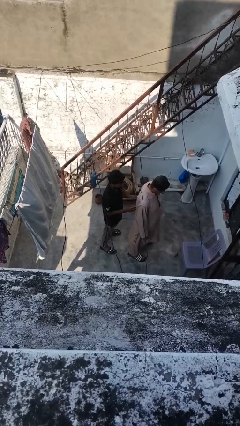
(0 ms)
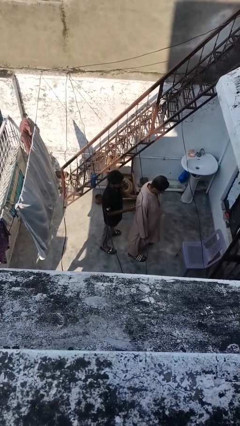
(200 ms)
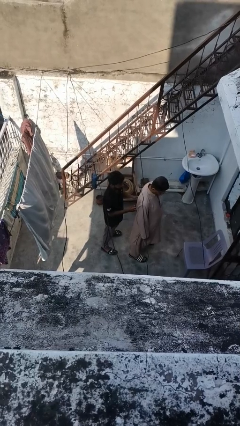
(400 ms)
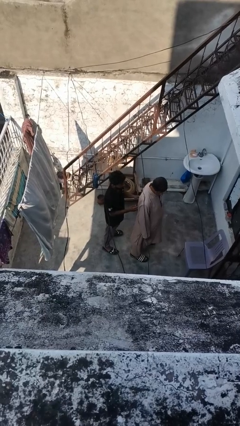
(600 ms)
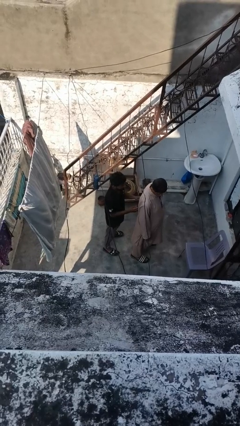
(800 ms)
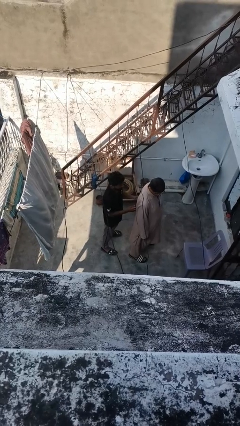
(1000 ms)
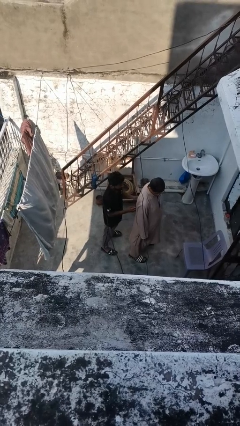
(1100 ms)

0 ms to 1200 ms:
person touches back of person

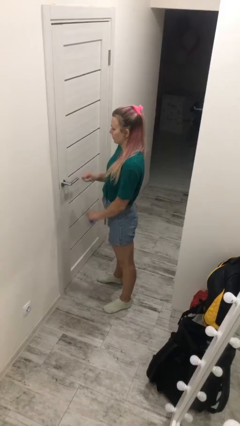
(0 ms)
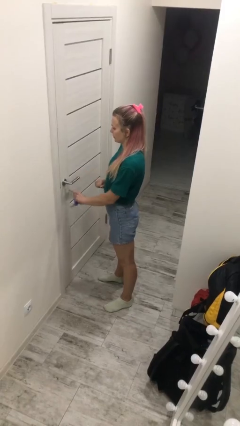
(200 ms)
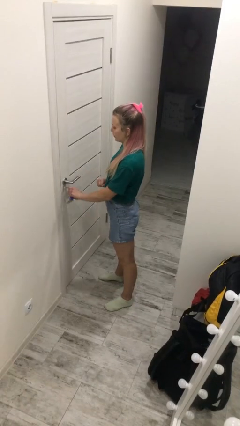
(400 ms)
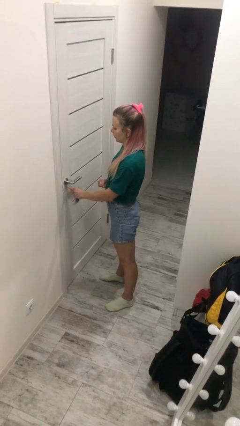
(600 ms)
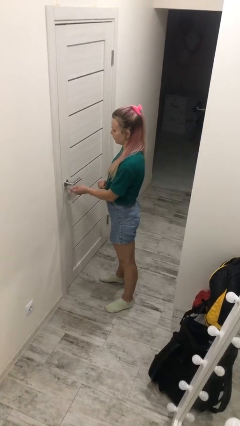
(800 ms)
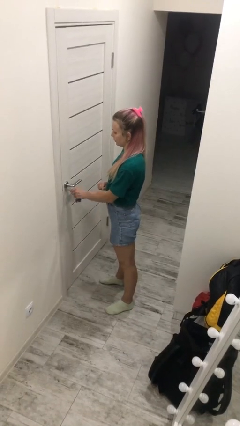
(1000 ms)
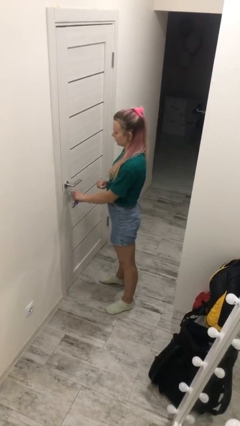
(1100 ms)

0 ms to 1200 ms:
person unlocks door with keys

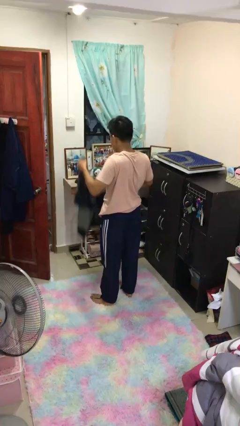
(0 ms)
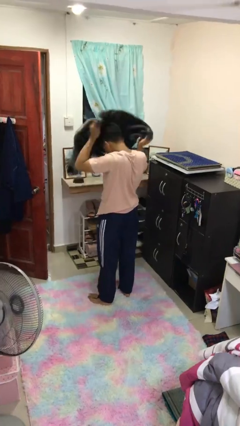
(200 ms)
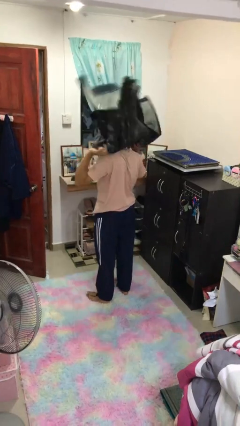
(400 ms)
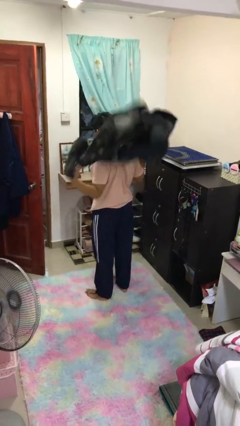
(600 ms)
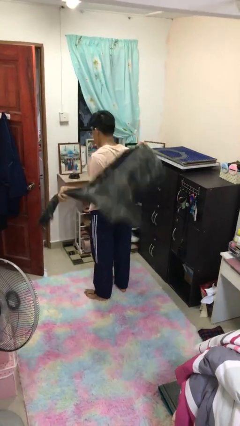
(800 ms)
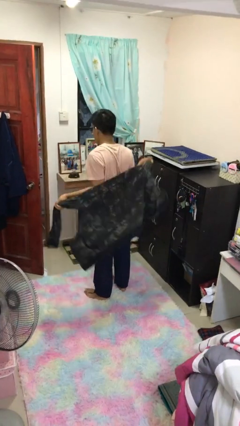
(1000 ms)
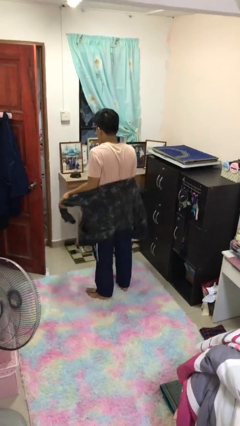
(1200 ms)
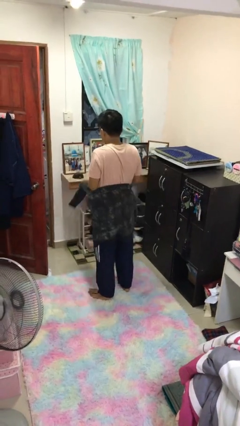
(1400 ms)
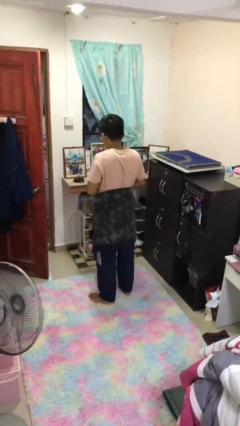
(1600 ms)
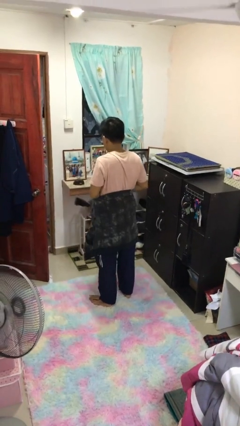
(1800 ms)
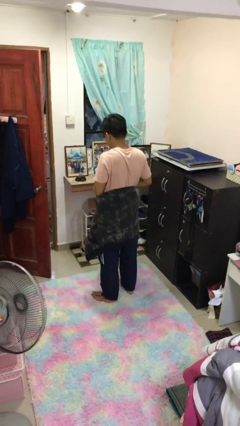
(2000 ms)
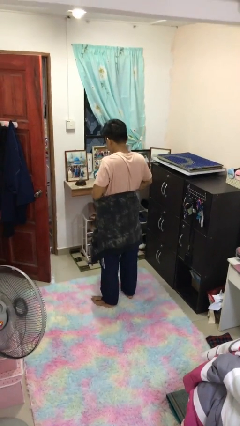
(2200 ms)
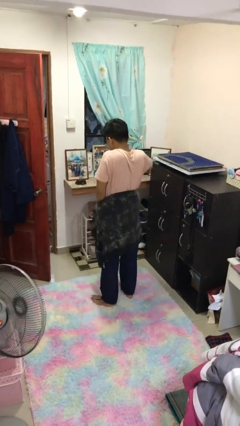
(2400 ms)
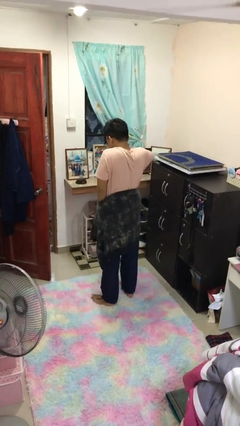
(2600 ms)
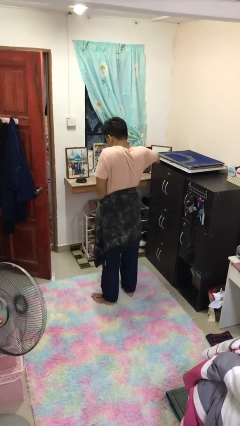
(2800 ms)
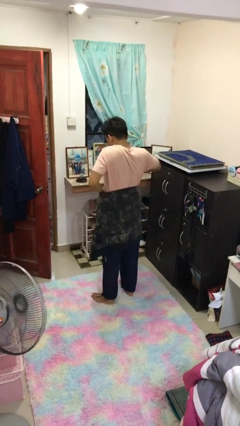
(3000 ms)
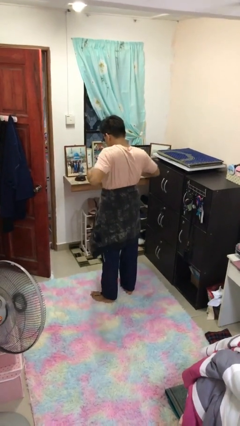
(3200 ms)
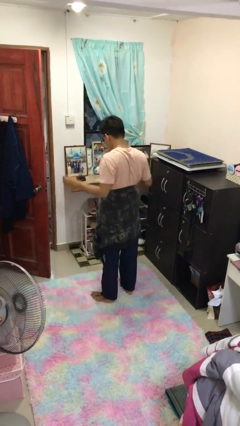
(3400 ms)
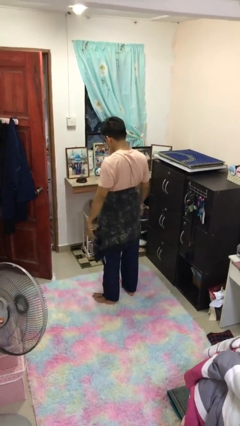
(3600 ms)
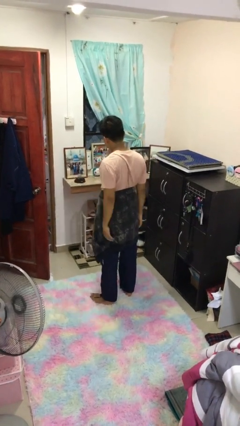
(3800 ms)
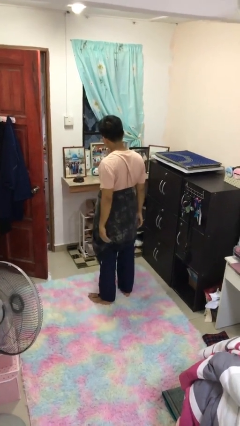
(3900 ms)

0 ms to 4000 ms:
person ties jacket around waist

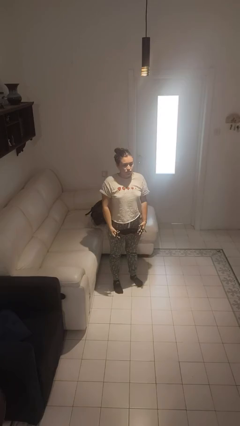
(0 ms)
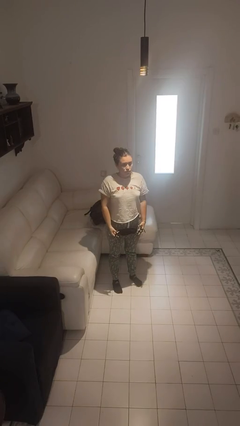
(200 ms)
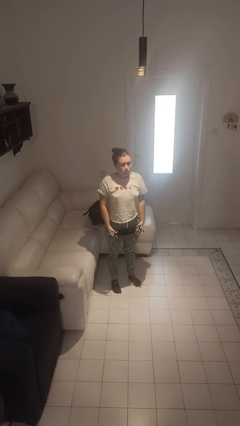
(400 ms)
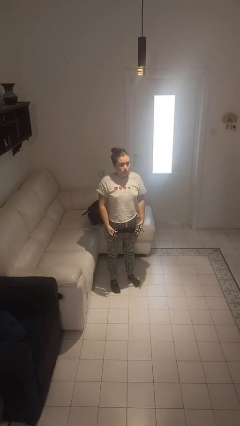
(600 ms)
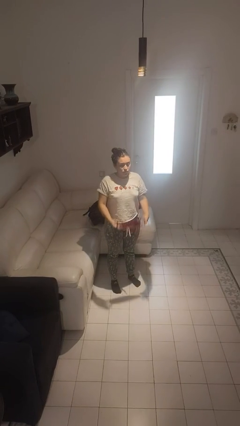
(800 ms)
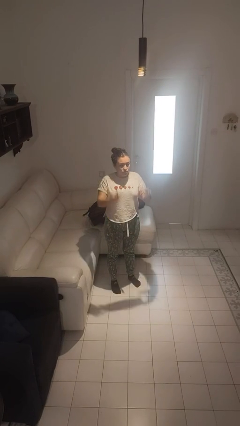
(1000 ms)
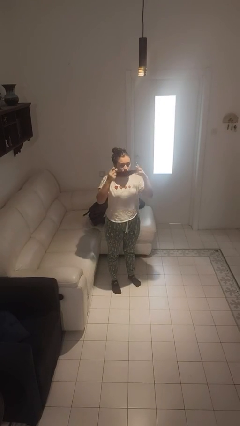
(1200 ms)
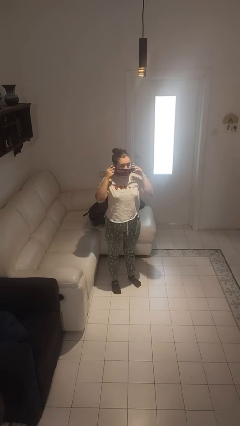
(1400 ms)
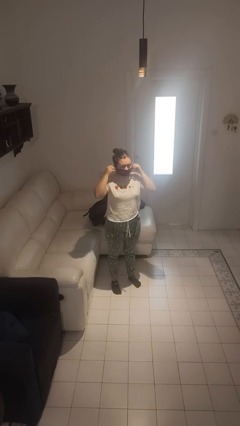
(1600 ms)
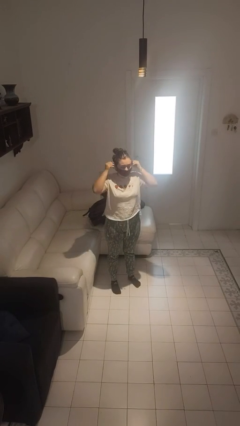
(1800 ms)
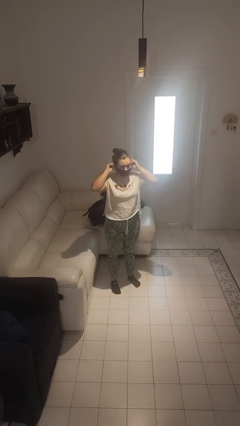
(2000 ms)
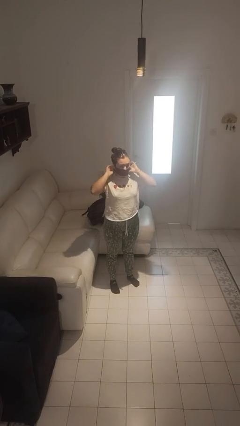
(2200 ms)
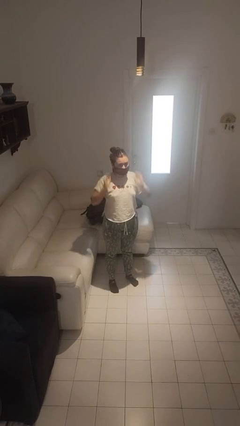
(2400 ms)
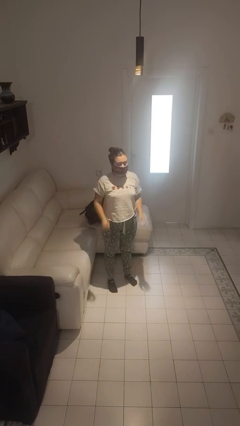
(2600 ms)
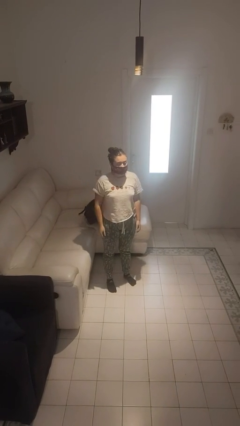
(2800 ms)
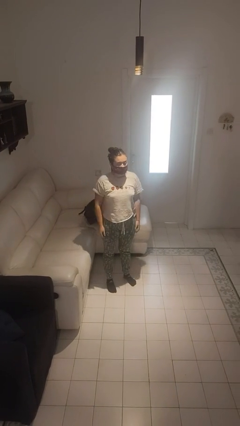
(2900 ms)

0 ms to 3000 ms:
person puts on facemask

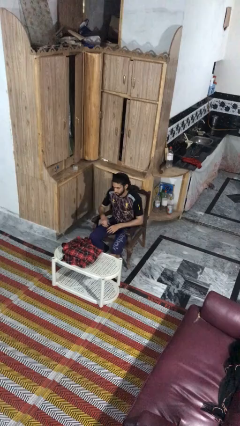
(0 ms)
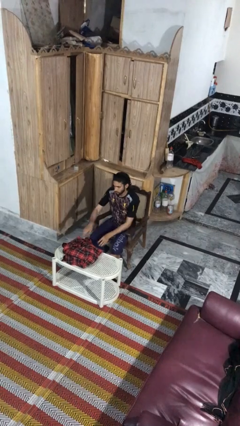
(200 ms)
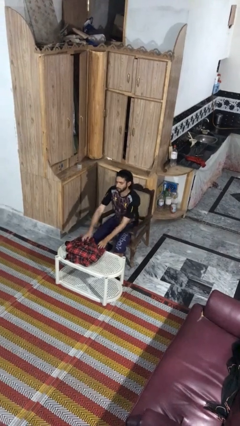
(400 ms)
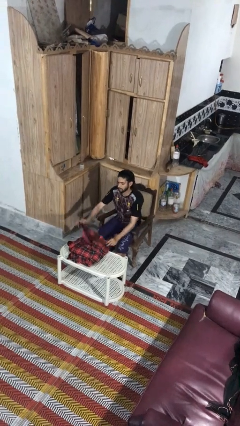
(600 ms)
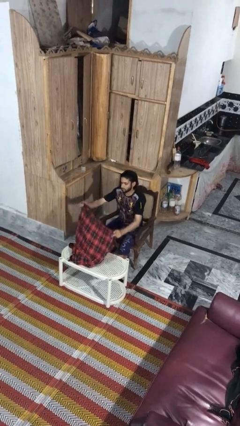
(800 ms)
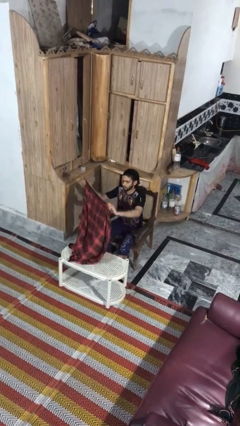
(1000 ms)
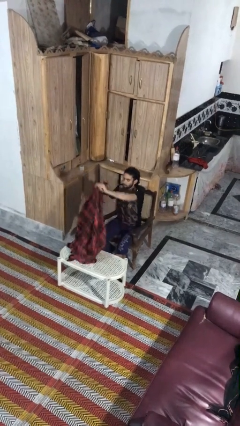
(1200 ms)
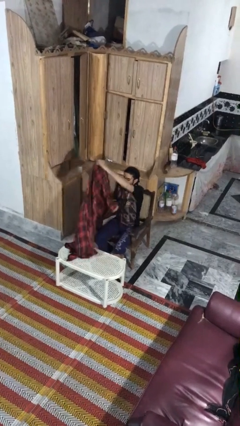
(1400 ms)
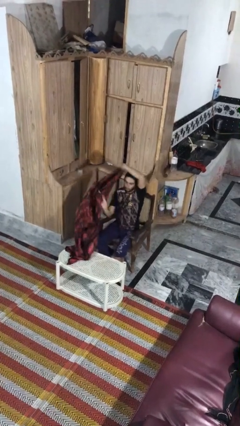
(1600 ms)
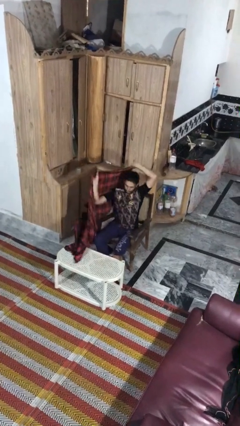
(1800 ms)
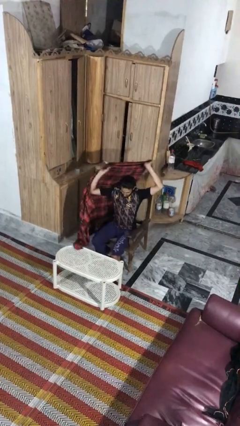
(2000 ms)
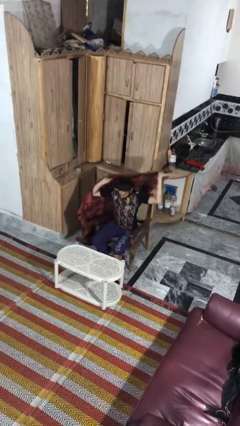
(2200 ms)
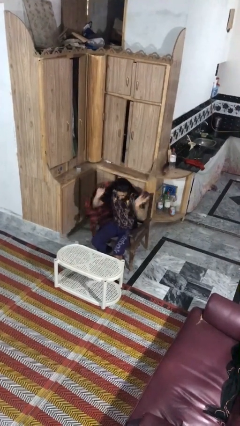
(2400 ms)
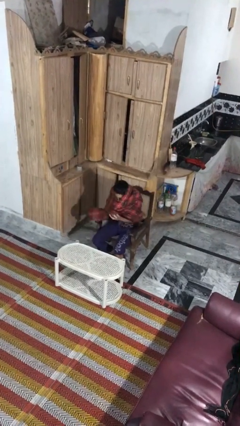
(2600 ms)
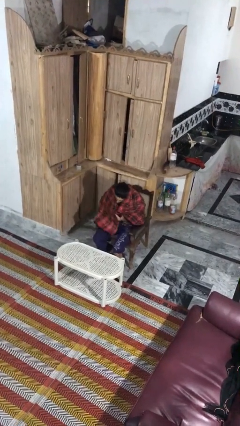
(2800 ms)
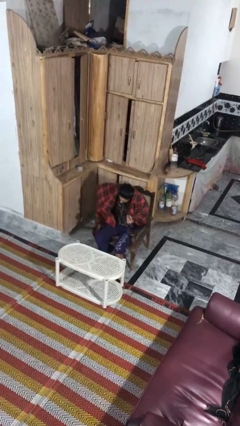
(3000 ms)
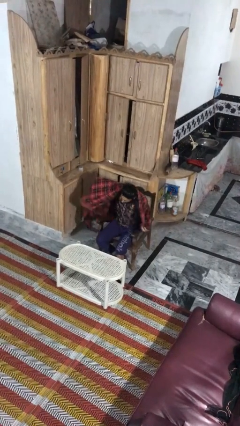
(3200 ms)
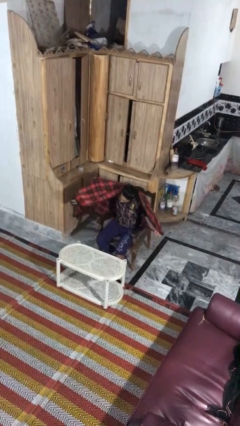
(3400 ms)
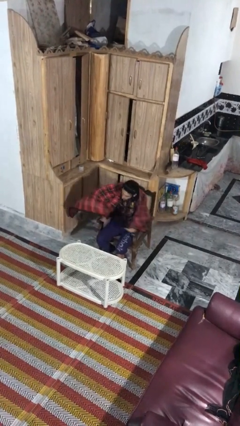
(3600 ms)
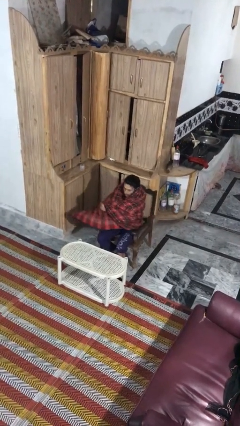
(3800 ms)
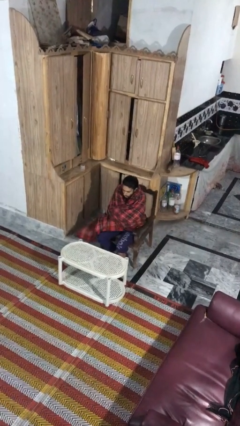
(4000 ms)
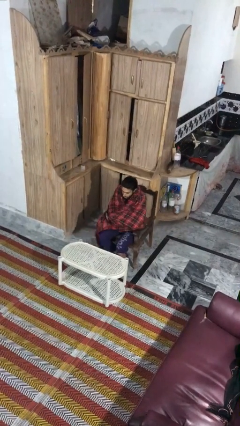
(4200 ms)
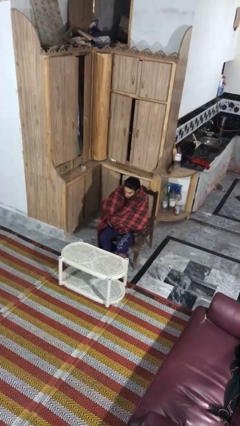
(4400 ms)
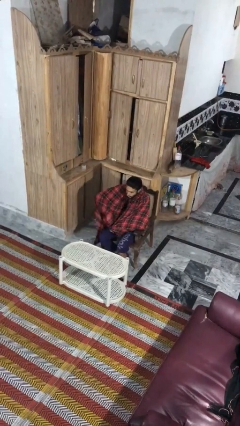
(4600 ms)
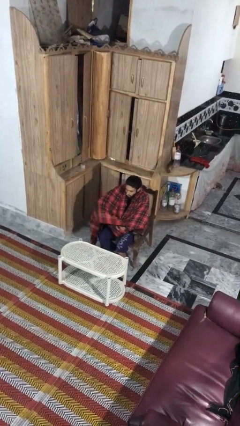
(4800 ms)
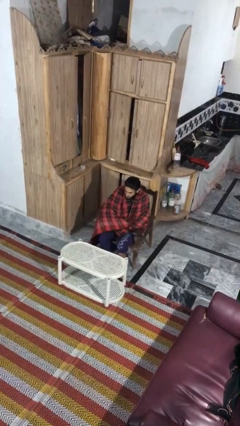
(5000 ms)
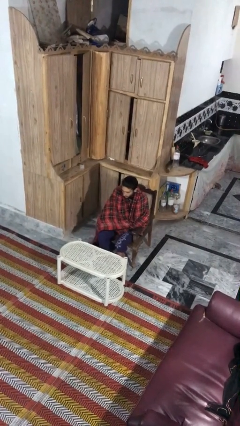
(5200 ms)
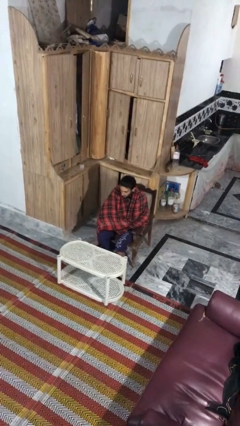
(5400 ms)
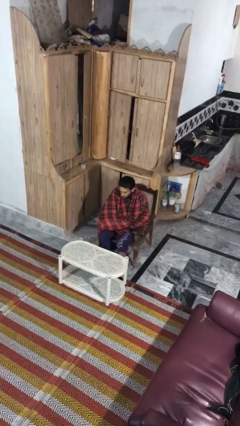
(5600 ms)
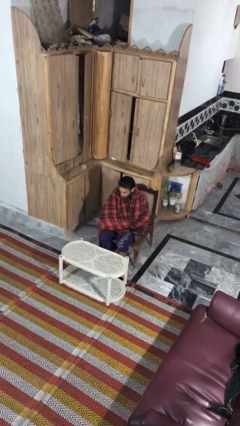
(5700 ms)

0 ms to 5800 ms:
person covers with blanket

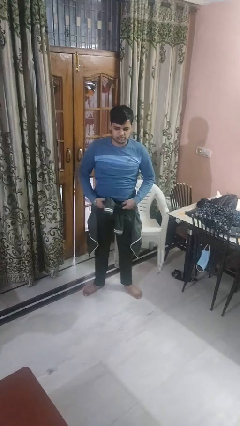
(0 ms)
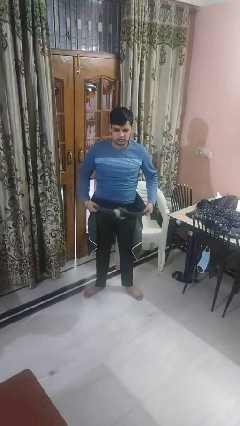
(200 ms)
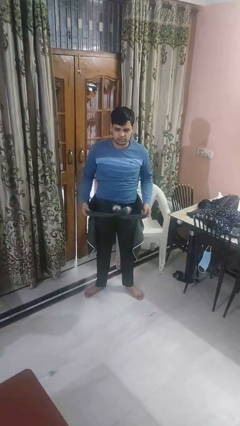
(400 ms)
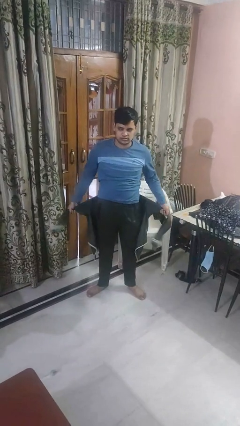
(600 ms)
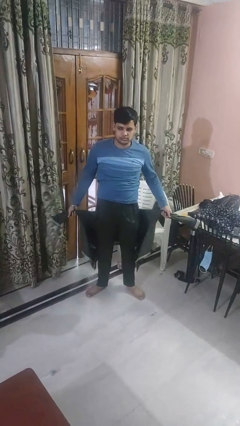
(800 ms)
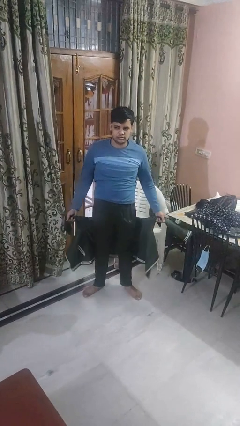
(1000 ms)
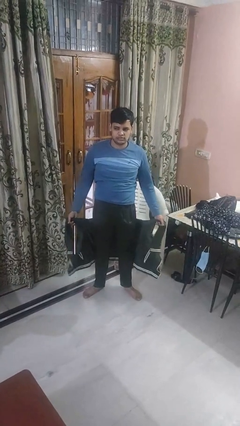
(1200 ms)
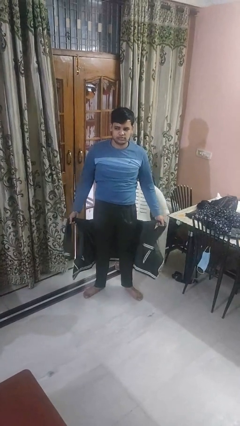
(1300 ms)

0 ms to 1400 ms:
person unties jacket around waist

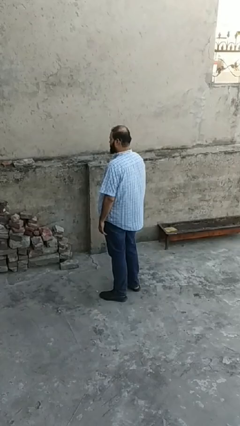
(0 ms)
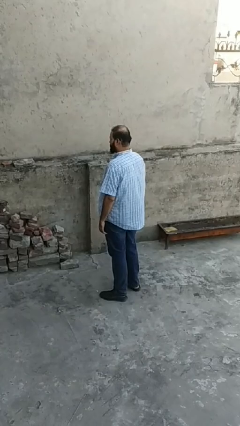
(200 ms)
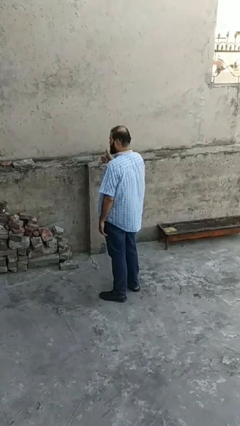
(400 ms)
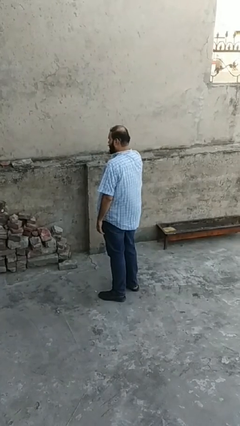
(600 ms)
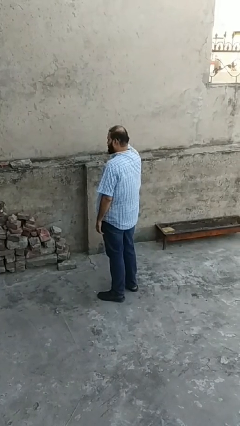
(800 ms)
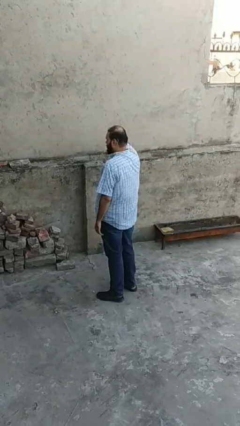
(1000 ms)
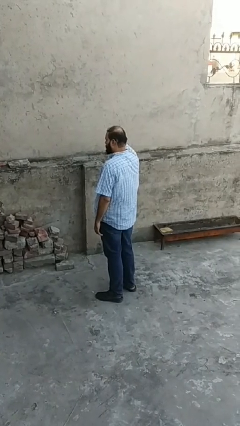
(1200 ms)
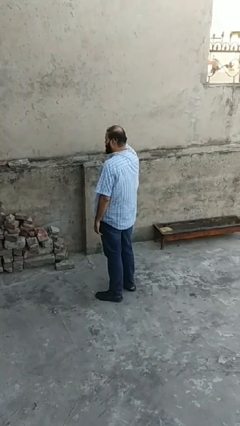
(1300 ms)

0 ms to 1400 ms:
person gestures call me
